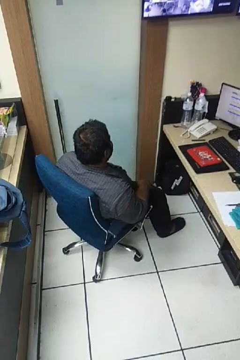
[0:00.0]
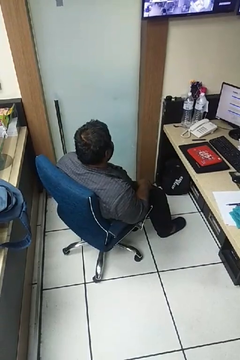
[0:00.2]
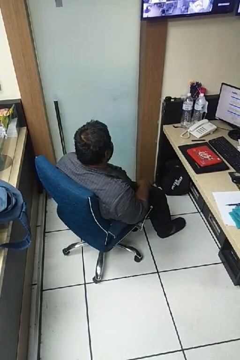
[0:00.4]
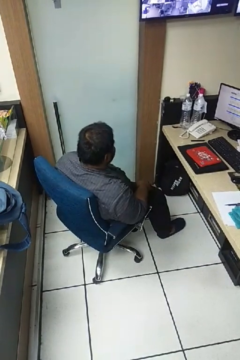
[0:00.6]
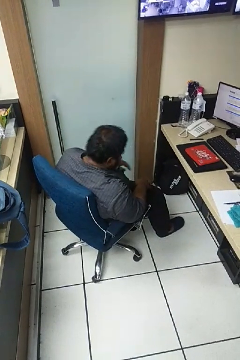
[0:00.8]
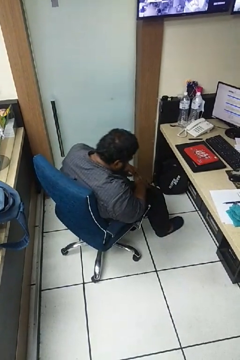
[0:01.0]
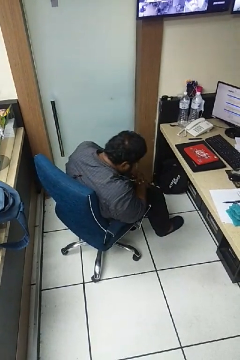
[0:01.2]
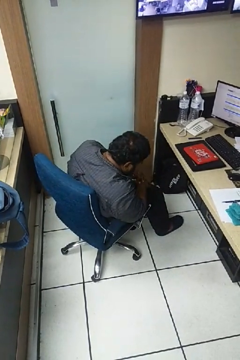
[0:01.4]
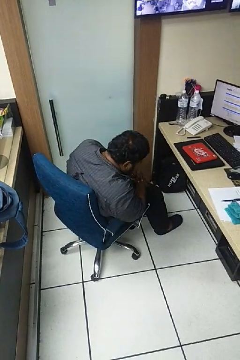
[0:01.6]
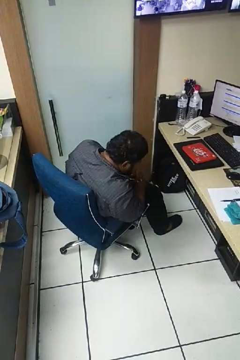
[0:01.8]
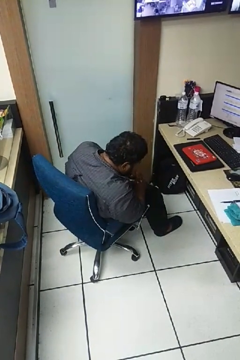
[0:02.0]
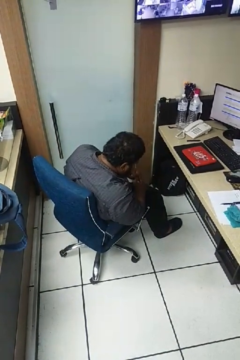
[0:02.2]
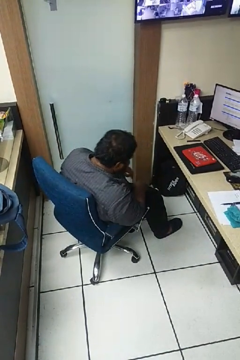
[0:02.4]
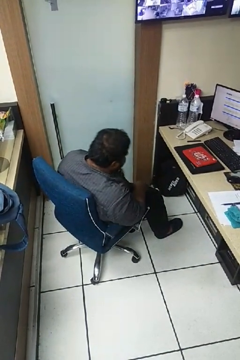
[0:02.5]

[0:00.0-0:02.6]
person looks at hands in lap

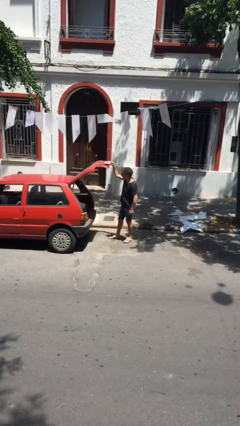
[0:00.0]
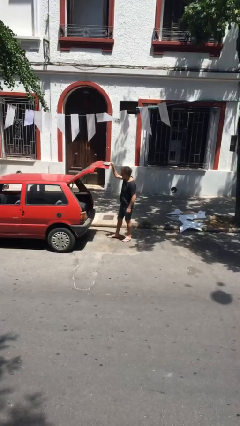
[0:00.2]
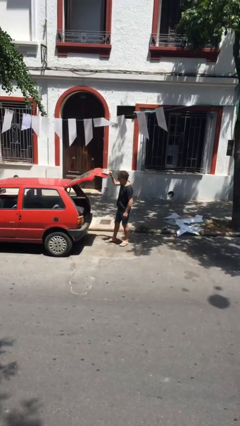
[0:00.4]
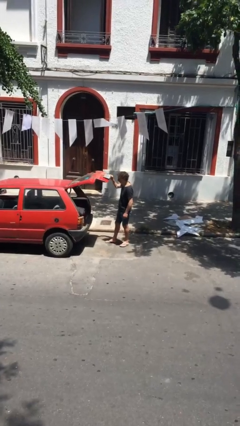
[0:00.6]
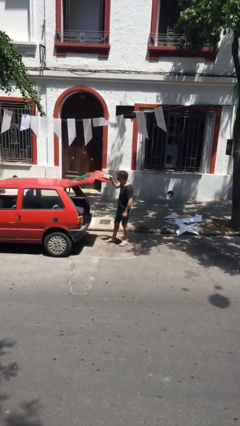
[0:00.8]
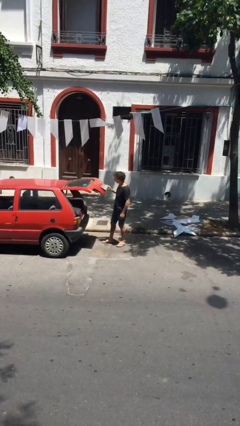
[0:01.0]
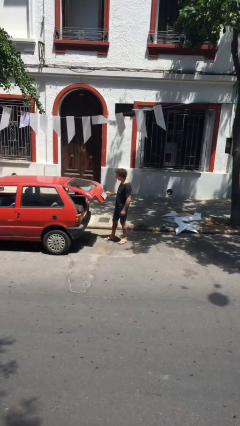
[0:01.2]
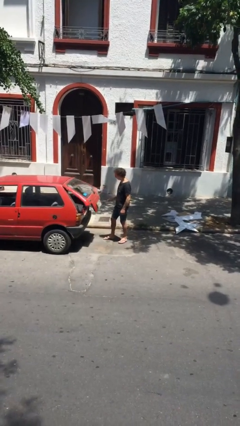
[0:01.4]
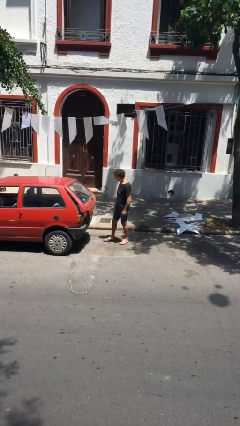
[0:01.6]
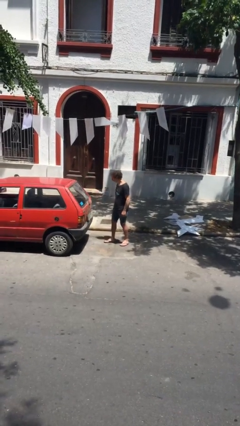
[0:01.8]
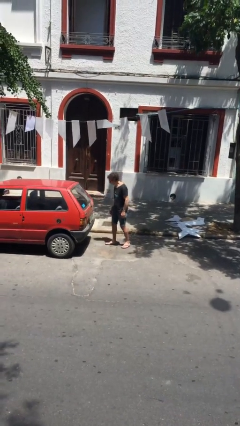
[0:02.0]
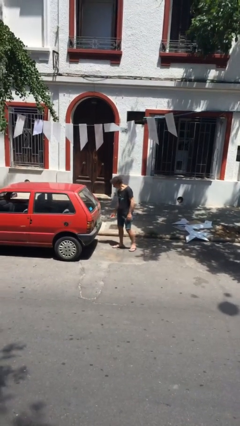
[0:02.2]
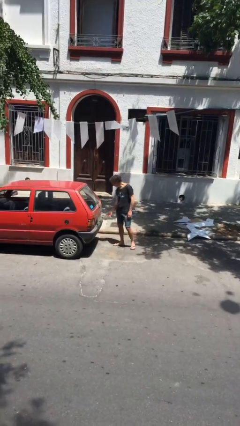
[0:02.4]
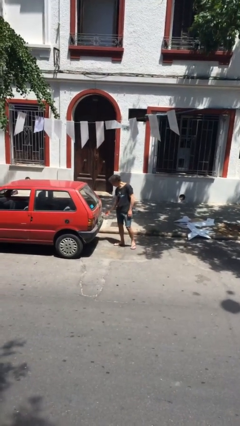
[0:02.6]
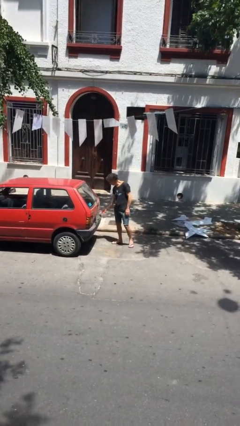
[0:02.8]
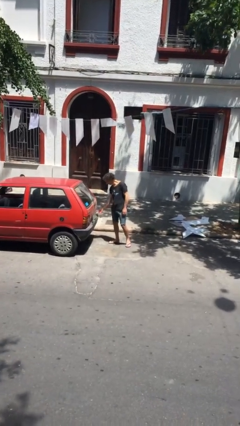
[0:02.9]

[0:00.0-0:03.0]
person closes car trunk

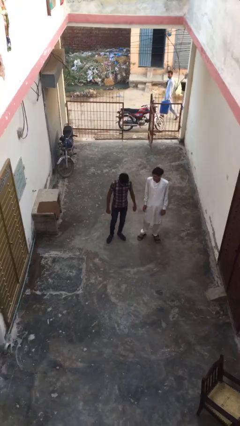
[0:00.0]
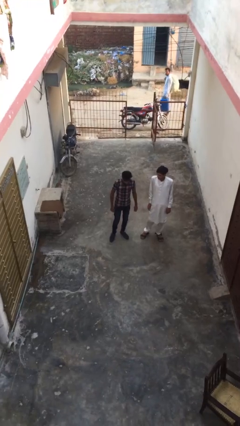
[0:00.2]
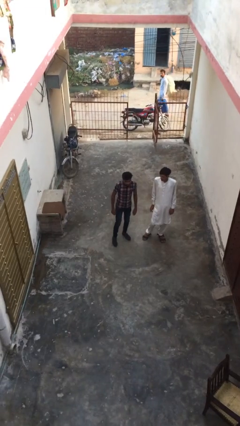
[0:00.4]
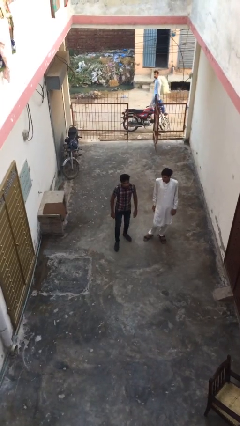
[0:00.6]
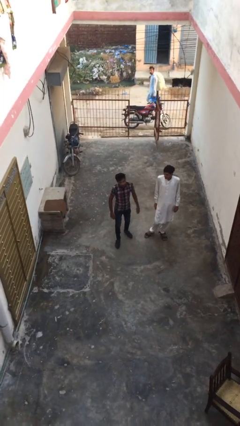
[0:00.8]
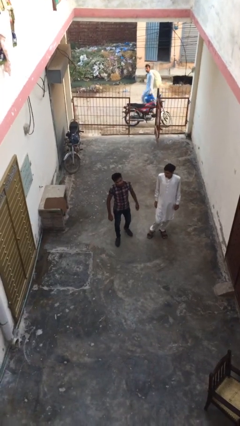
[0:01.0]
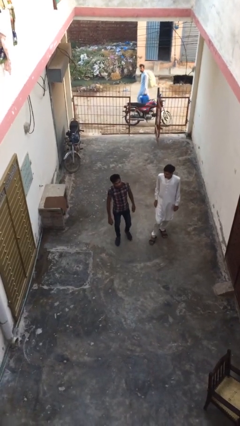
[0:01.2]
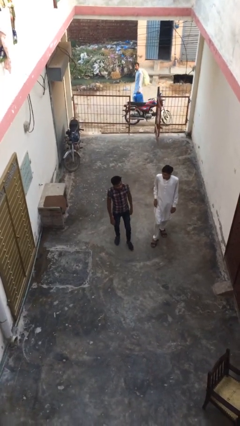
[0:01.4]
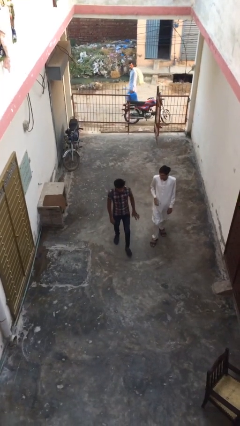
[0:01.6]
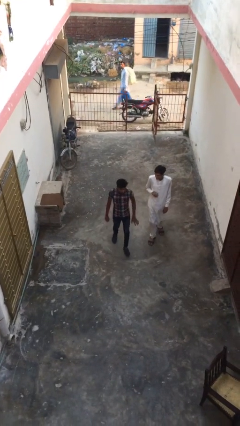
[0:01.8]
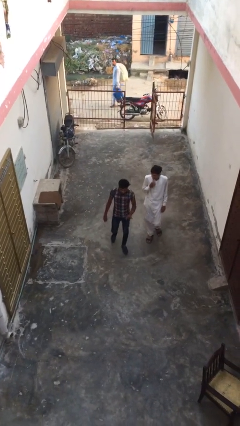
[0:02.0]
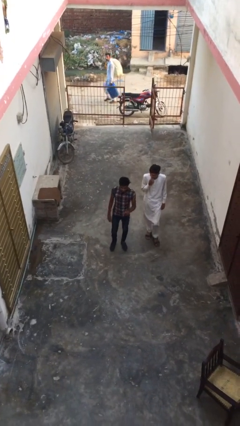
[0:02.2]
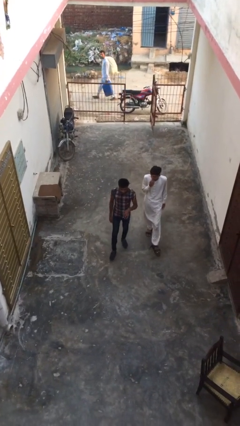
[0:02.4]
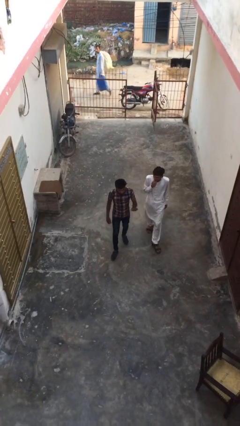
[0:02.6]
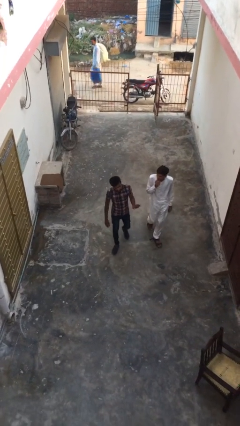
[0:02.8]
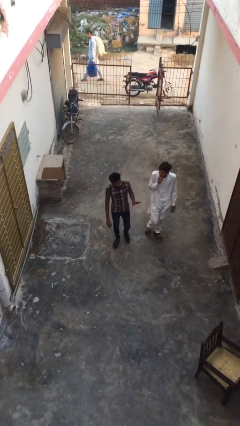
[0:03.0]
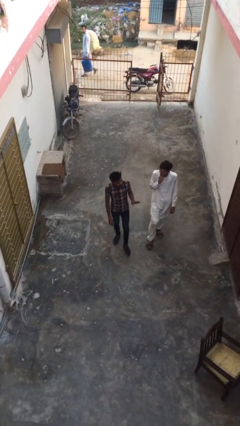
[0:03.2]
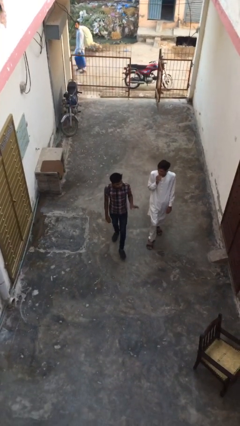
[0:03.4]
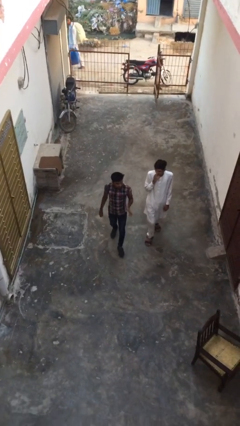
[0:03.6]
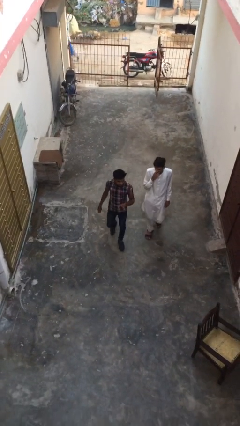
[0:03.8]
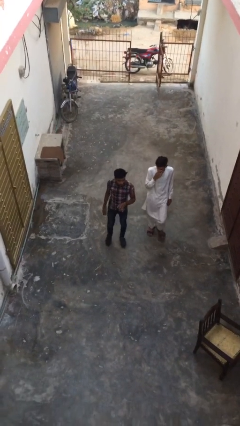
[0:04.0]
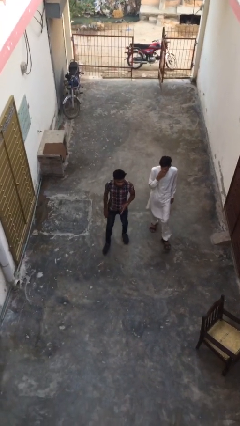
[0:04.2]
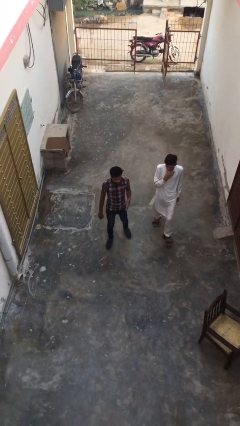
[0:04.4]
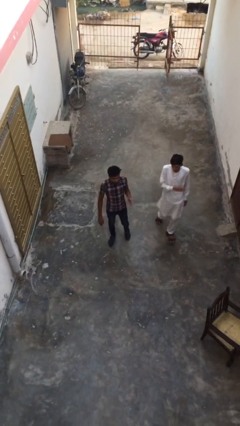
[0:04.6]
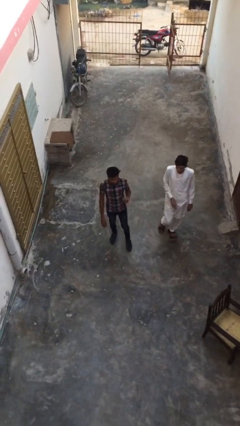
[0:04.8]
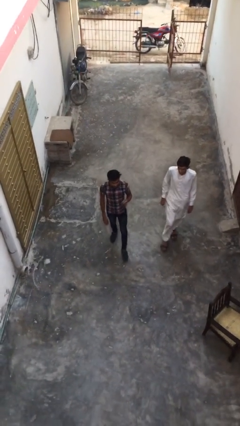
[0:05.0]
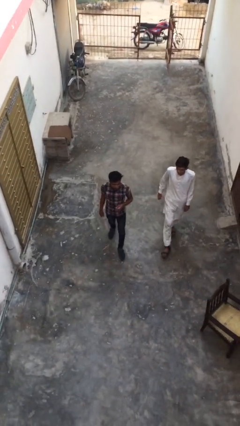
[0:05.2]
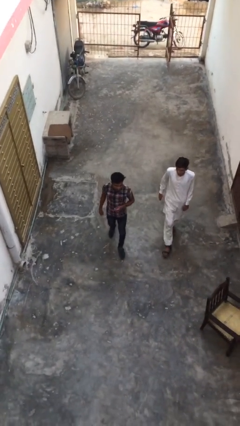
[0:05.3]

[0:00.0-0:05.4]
person talks to person

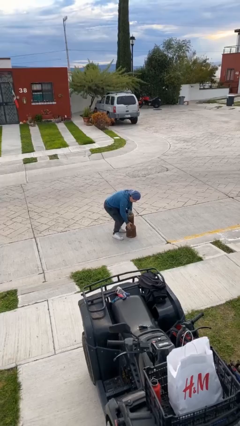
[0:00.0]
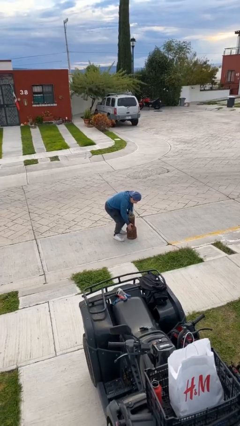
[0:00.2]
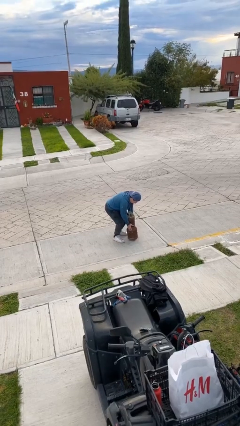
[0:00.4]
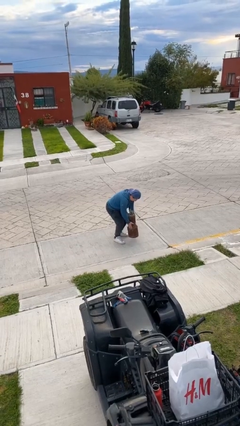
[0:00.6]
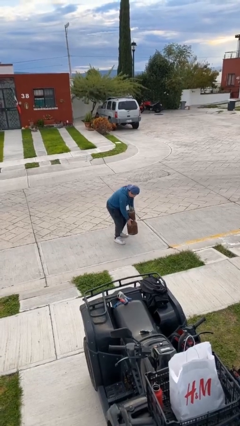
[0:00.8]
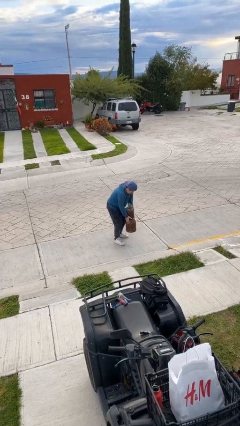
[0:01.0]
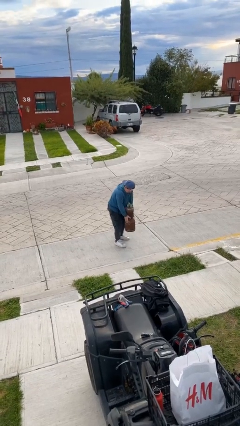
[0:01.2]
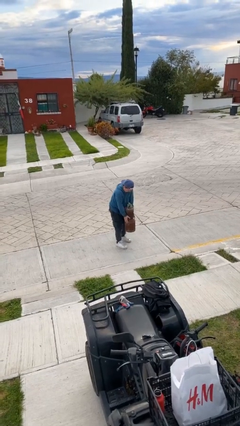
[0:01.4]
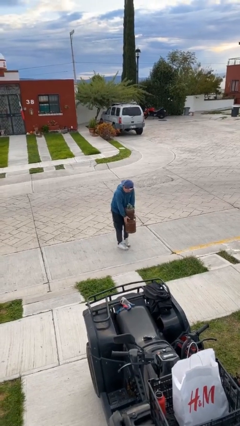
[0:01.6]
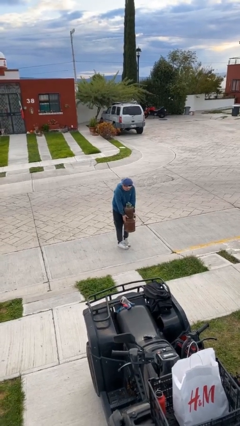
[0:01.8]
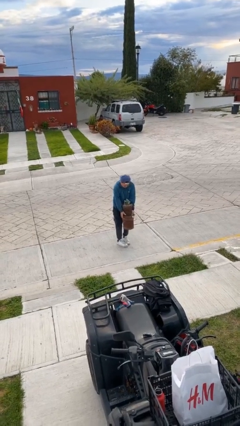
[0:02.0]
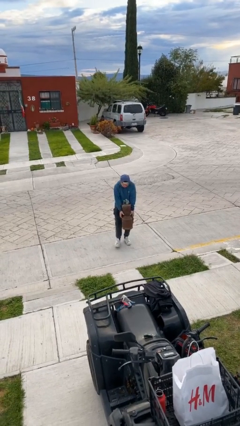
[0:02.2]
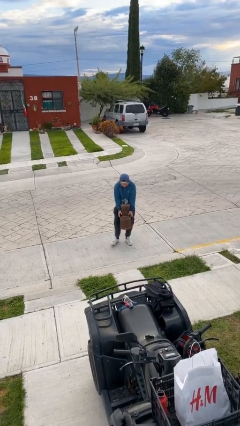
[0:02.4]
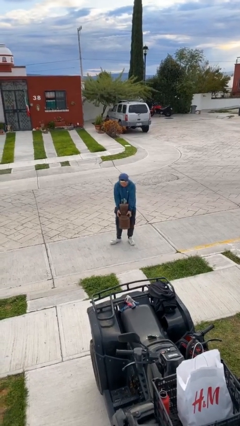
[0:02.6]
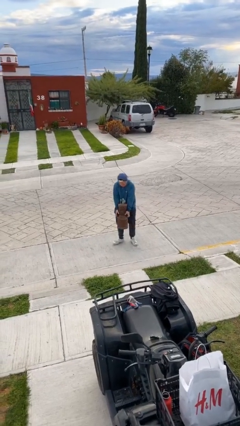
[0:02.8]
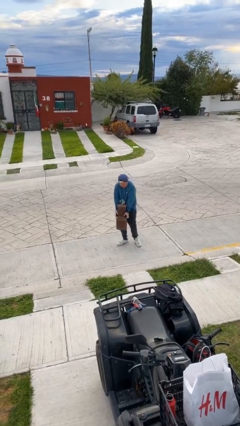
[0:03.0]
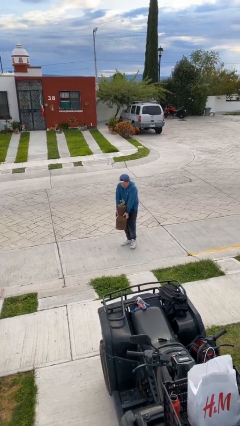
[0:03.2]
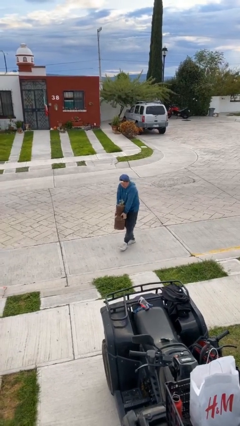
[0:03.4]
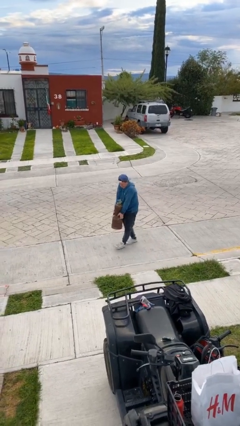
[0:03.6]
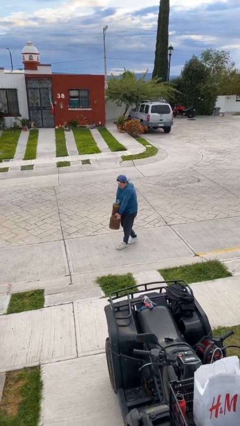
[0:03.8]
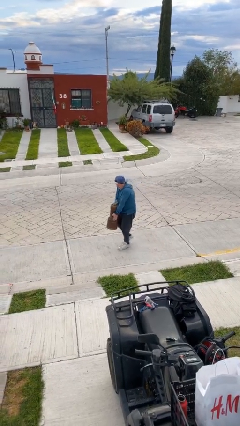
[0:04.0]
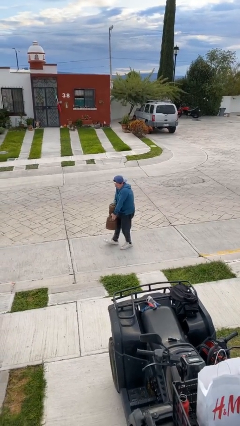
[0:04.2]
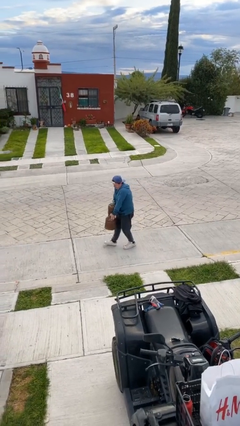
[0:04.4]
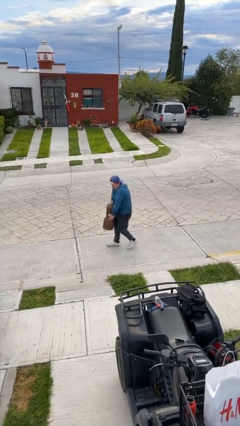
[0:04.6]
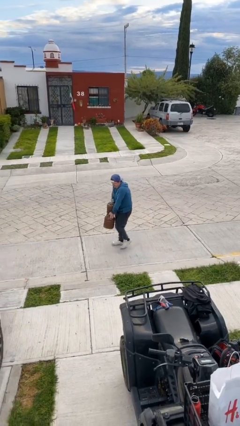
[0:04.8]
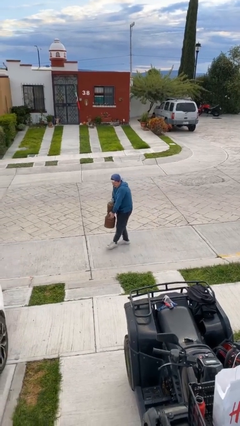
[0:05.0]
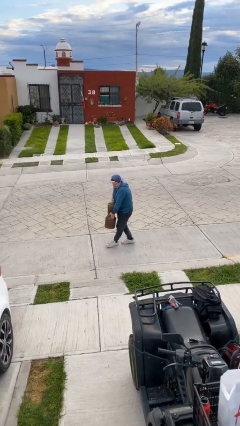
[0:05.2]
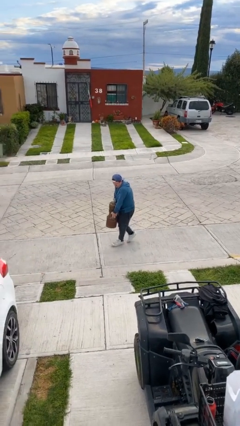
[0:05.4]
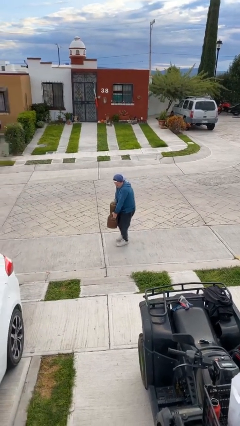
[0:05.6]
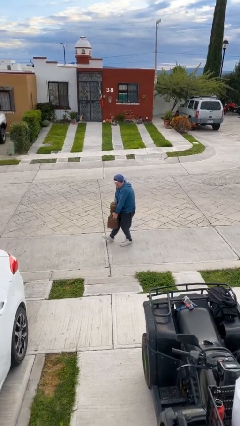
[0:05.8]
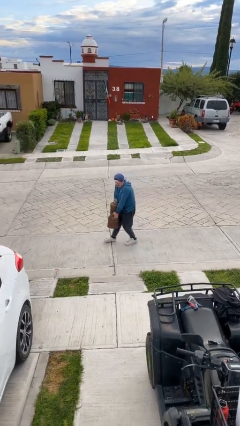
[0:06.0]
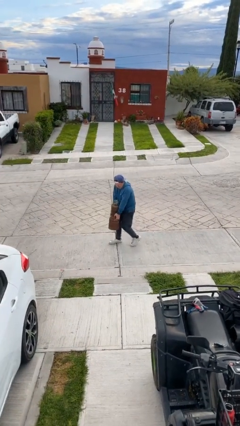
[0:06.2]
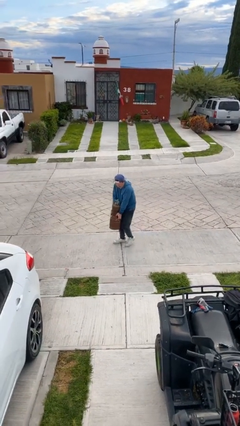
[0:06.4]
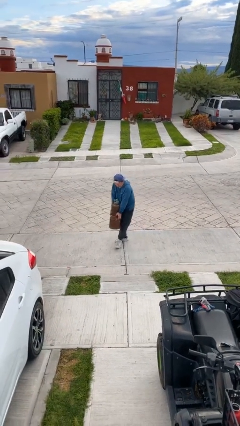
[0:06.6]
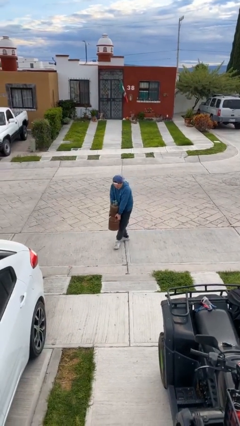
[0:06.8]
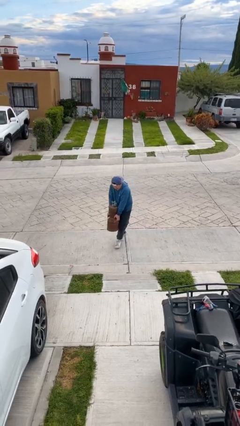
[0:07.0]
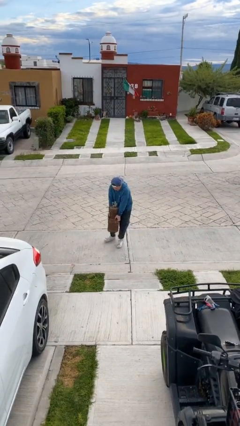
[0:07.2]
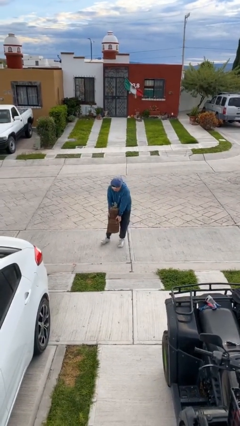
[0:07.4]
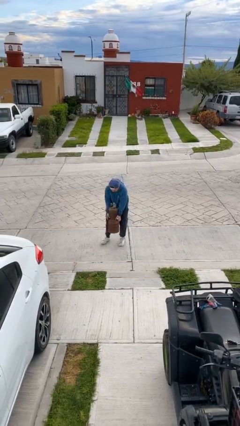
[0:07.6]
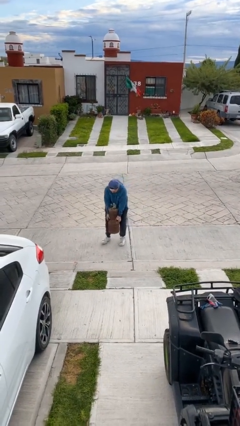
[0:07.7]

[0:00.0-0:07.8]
person carries heavy object
